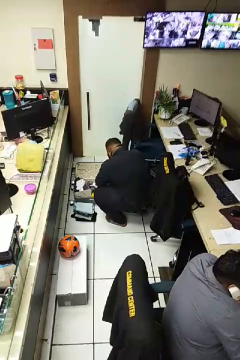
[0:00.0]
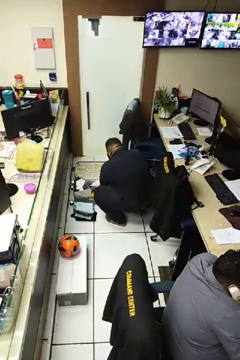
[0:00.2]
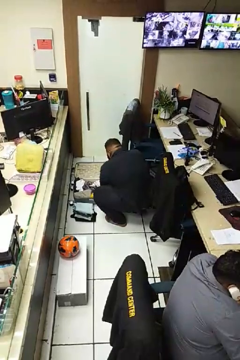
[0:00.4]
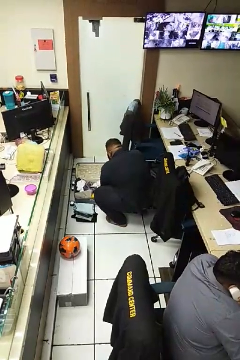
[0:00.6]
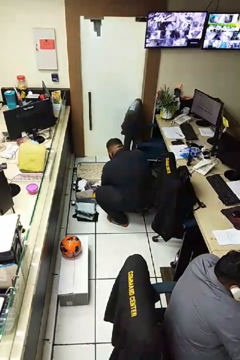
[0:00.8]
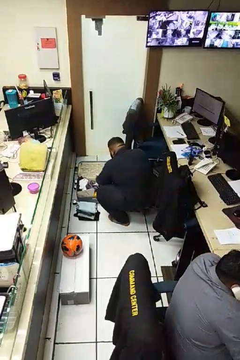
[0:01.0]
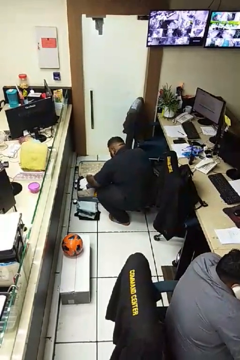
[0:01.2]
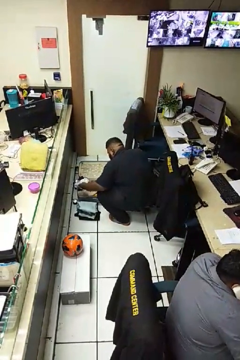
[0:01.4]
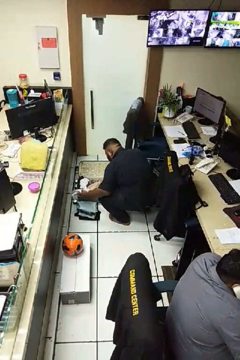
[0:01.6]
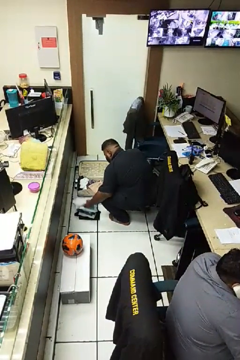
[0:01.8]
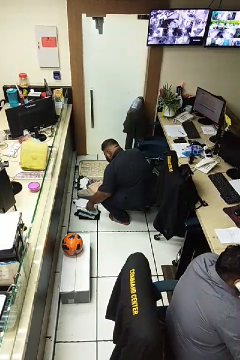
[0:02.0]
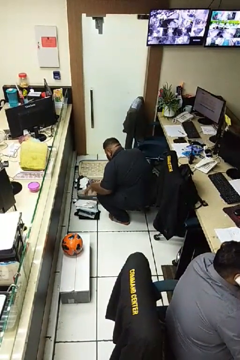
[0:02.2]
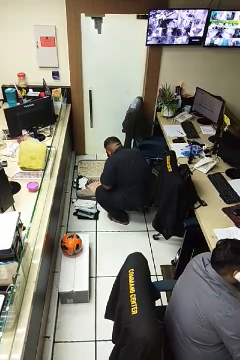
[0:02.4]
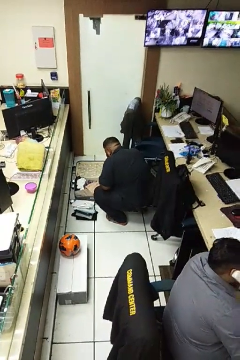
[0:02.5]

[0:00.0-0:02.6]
person unloads clothes from suitcase

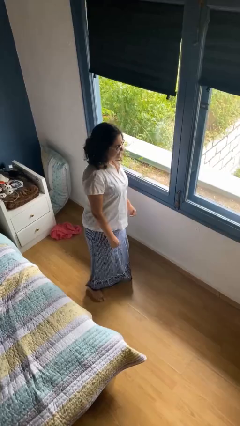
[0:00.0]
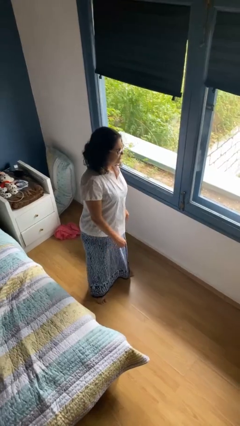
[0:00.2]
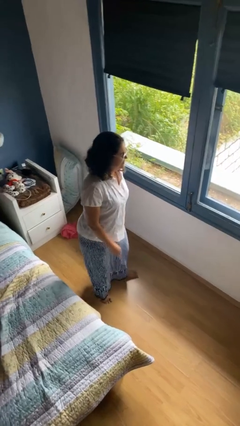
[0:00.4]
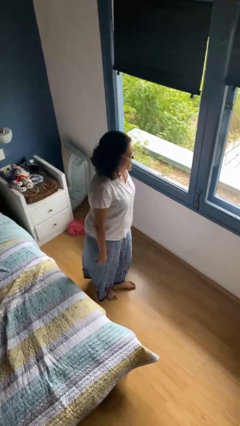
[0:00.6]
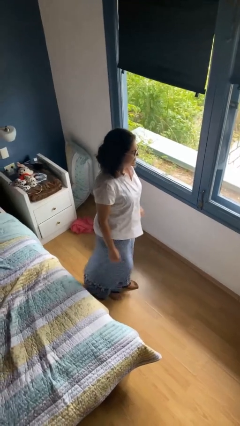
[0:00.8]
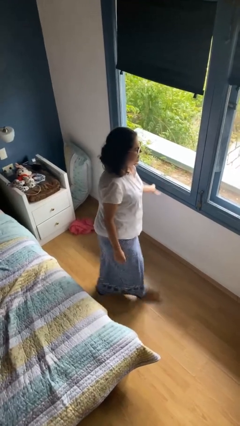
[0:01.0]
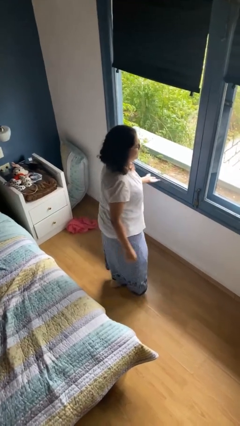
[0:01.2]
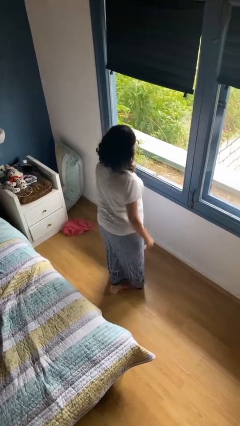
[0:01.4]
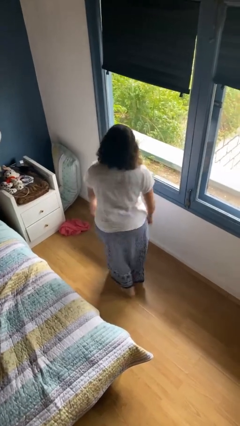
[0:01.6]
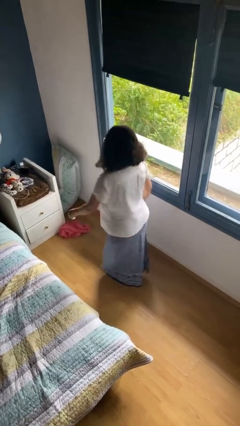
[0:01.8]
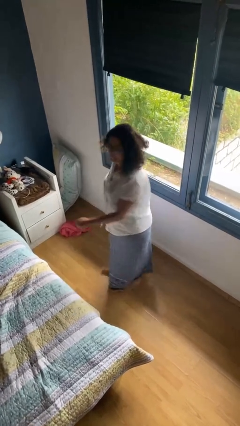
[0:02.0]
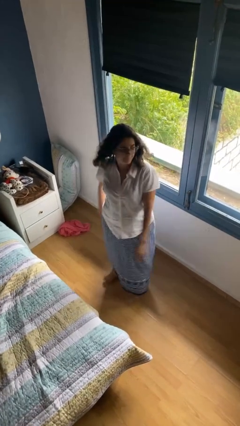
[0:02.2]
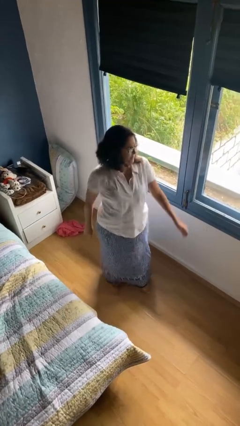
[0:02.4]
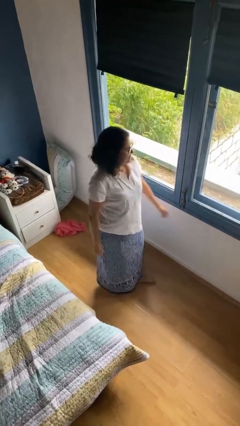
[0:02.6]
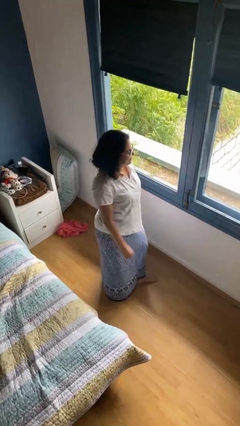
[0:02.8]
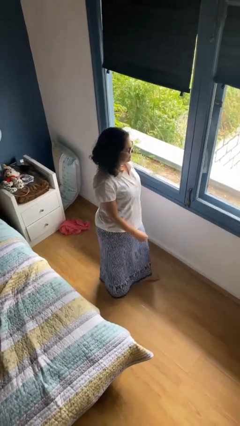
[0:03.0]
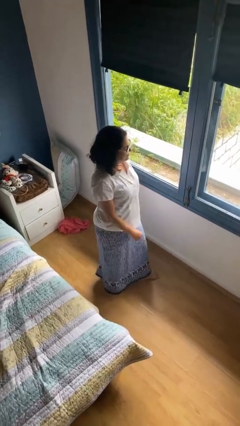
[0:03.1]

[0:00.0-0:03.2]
person twirls

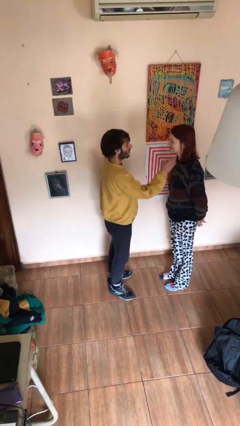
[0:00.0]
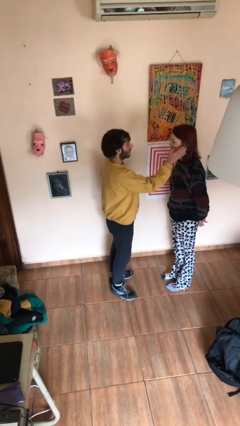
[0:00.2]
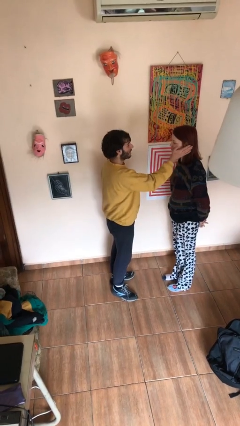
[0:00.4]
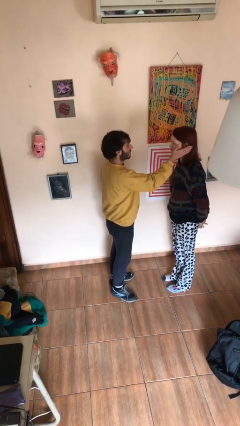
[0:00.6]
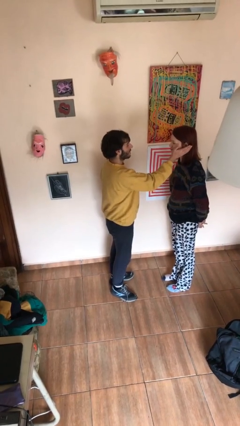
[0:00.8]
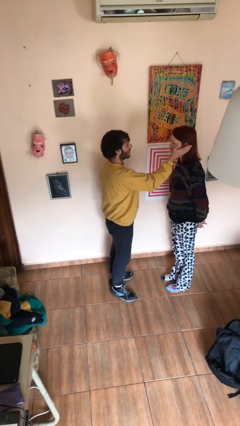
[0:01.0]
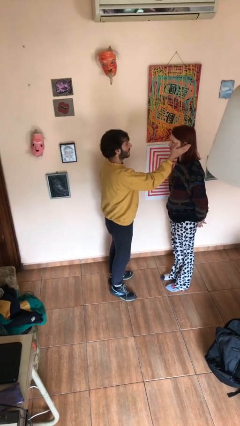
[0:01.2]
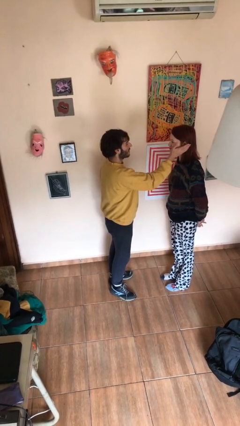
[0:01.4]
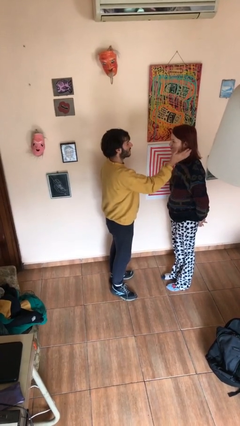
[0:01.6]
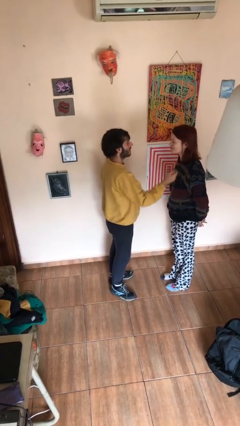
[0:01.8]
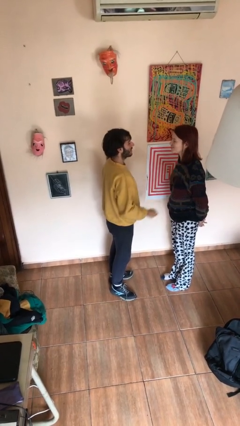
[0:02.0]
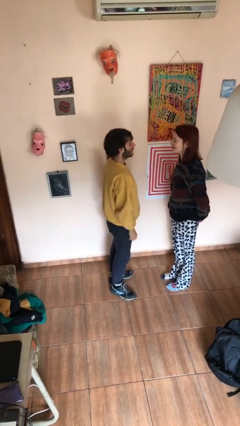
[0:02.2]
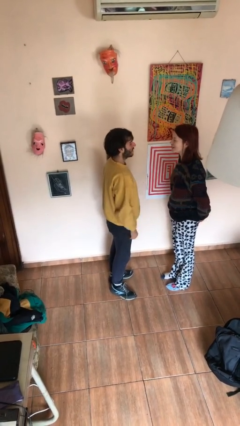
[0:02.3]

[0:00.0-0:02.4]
person touches face of person

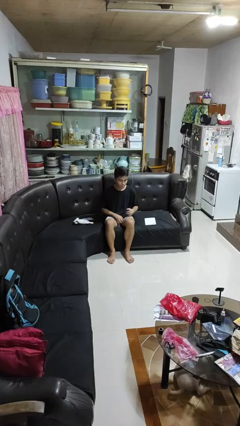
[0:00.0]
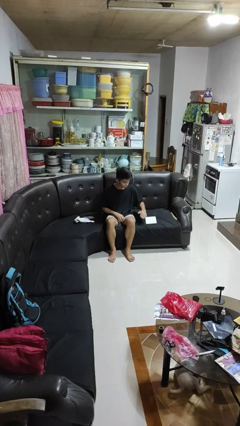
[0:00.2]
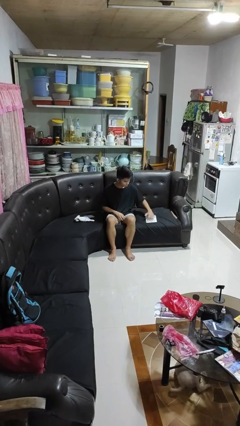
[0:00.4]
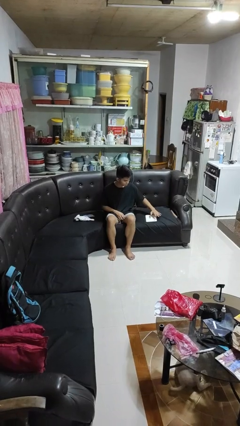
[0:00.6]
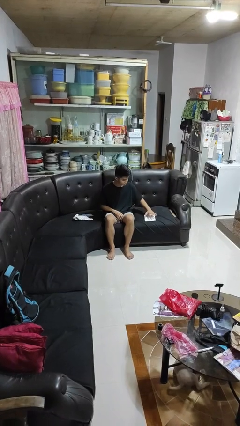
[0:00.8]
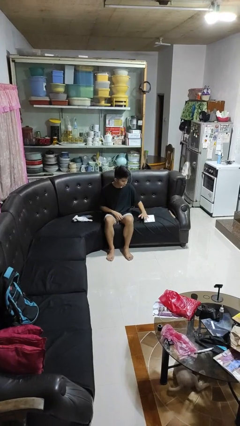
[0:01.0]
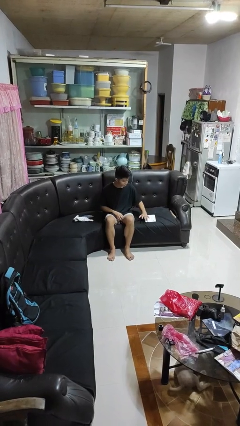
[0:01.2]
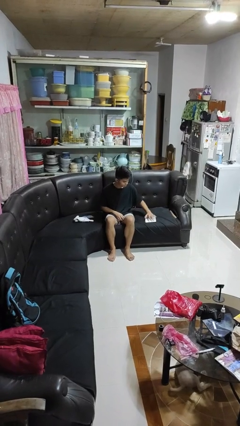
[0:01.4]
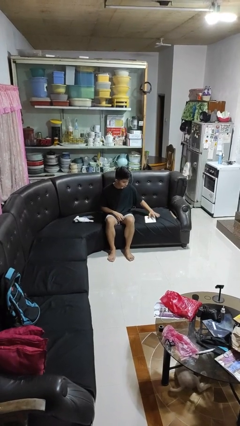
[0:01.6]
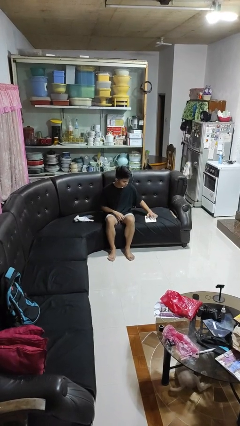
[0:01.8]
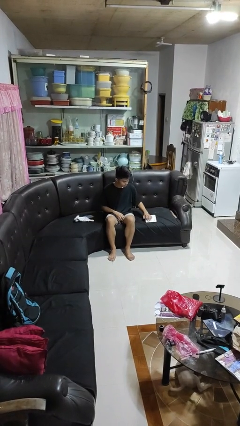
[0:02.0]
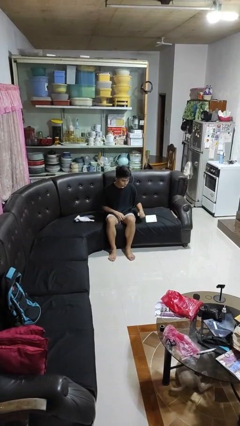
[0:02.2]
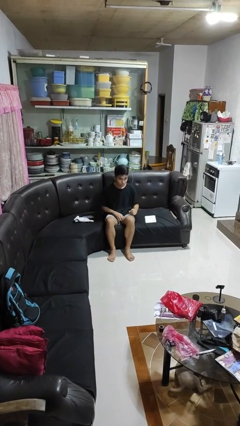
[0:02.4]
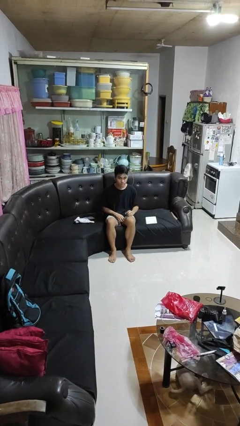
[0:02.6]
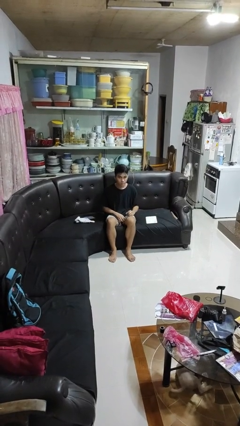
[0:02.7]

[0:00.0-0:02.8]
person waves hand over object

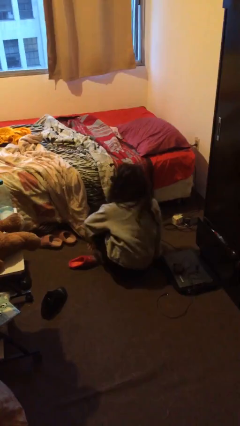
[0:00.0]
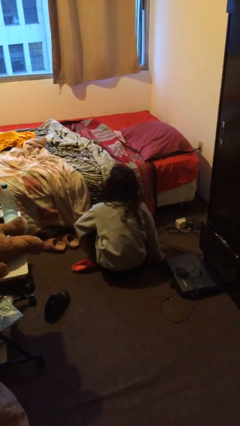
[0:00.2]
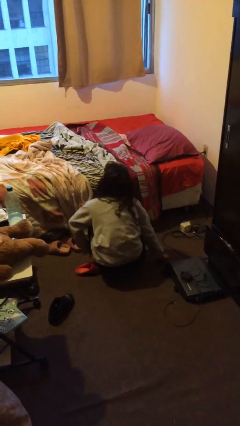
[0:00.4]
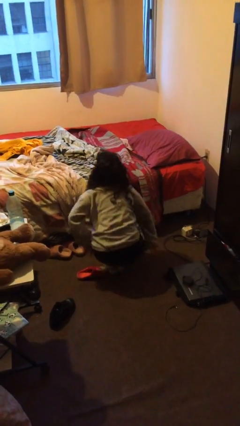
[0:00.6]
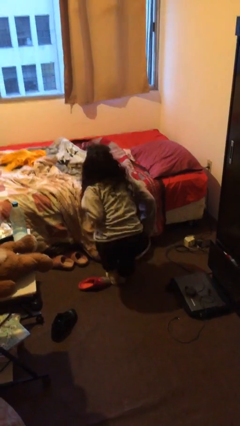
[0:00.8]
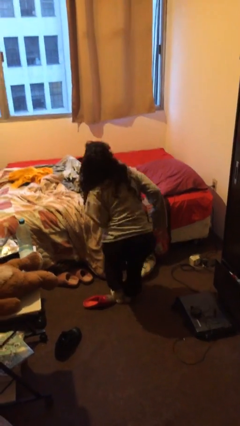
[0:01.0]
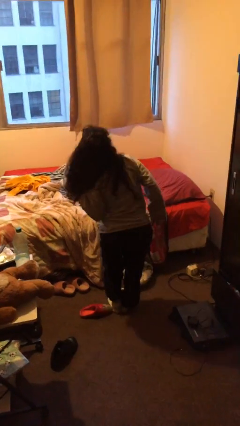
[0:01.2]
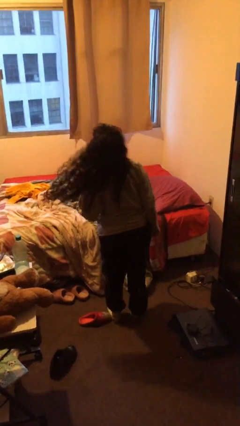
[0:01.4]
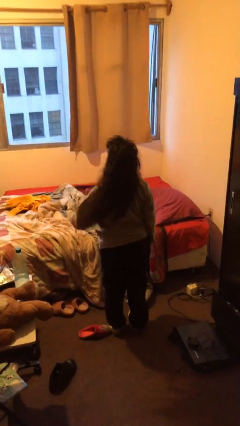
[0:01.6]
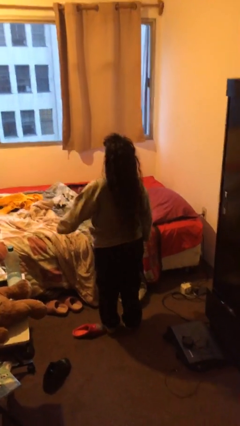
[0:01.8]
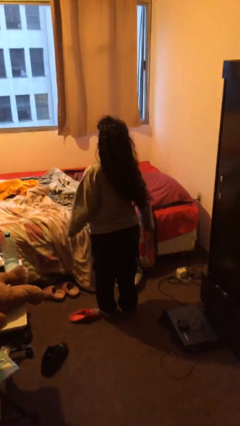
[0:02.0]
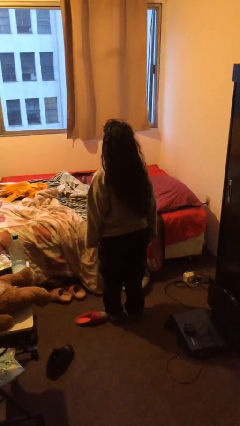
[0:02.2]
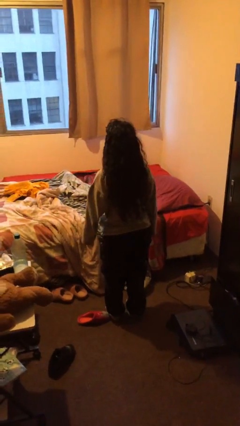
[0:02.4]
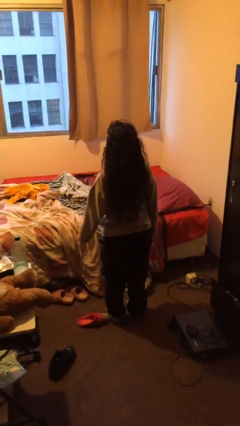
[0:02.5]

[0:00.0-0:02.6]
person stands up from floor

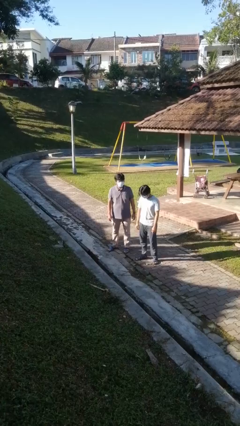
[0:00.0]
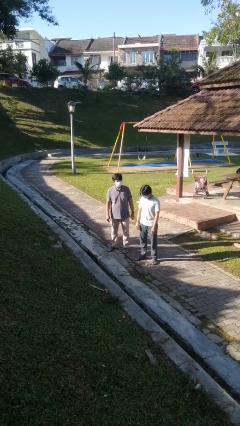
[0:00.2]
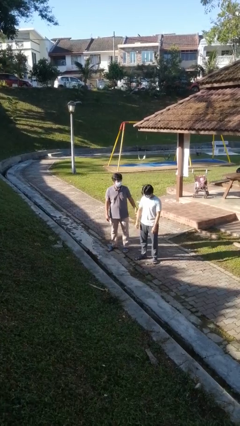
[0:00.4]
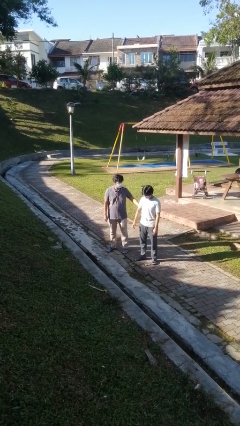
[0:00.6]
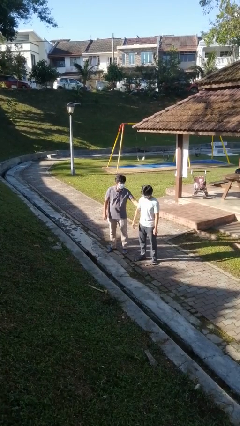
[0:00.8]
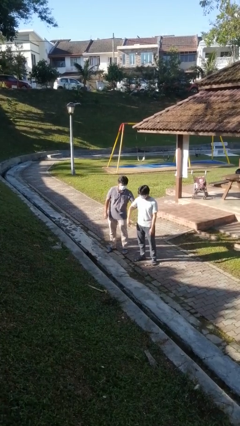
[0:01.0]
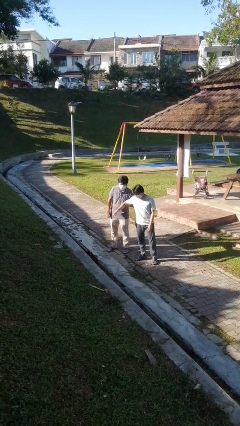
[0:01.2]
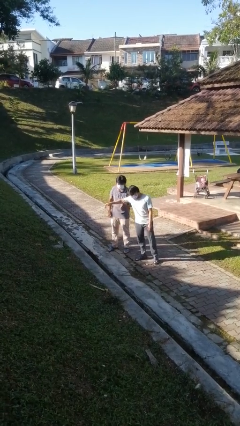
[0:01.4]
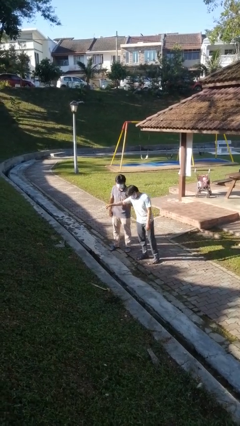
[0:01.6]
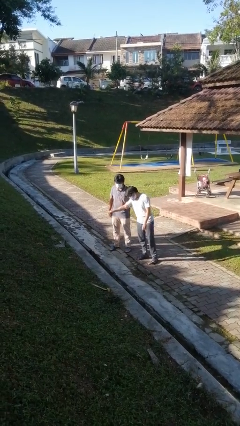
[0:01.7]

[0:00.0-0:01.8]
person grabs person by bicep

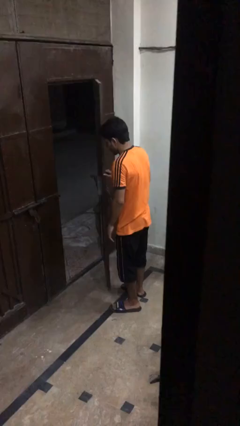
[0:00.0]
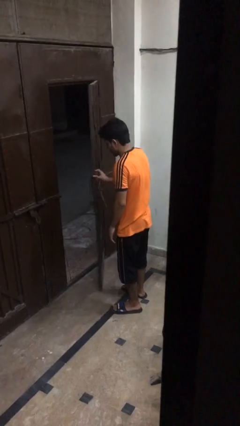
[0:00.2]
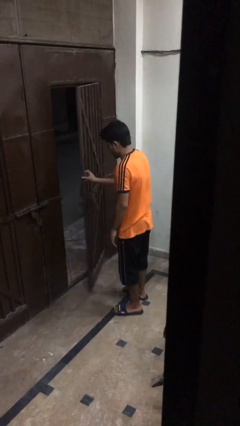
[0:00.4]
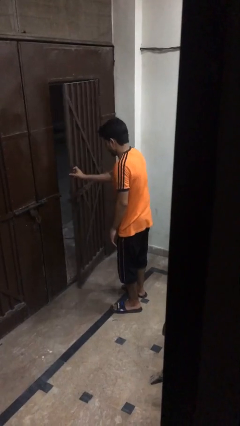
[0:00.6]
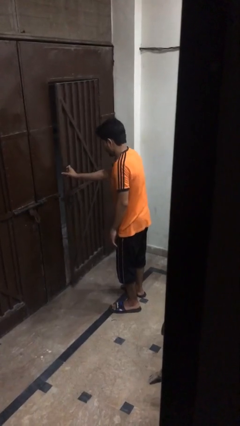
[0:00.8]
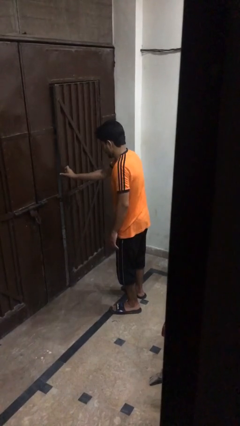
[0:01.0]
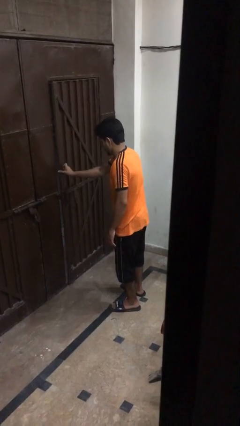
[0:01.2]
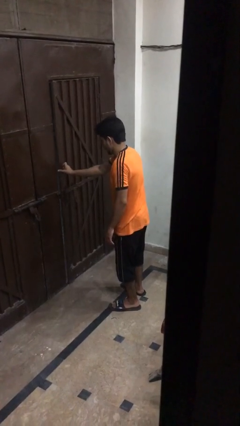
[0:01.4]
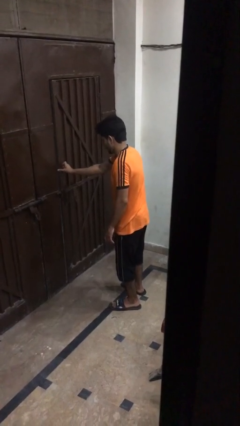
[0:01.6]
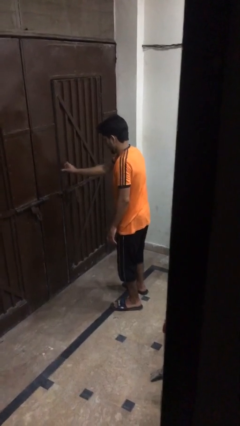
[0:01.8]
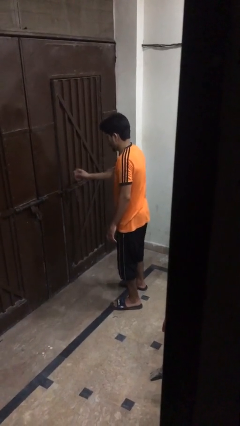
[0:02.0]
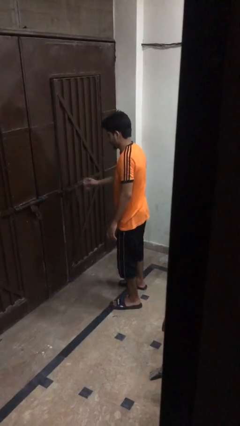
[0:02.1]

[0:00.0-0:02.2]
person closes gate
